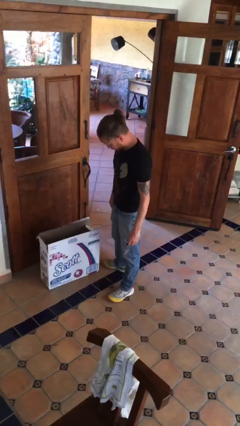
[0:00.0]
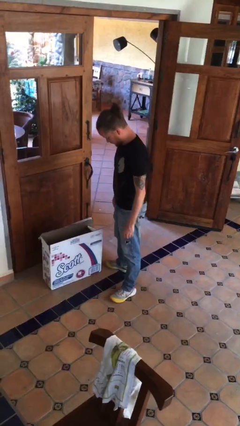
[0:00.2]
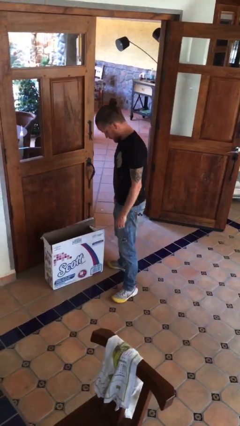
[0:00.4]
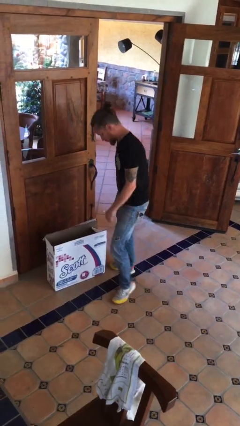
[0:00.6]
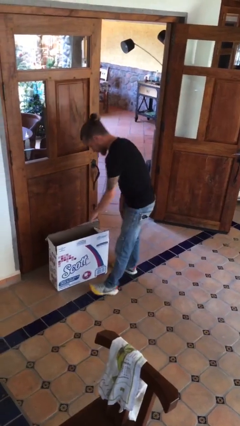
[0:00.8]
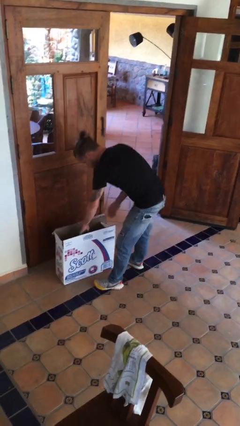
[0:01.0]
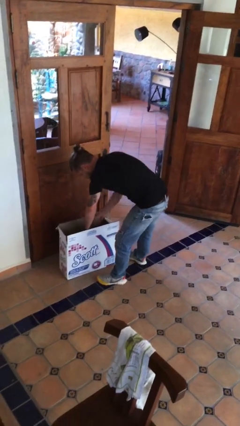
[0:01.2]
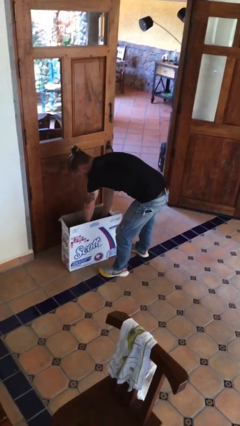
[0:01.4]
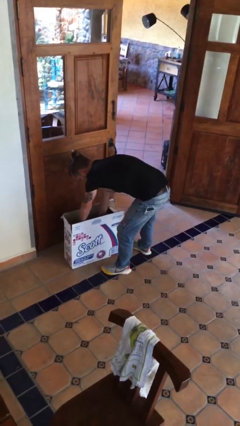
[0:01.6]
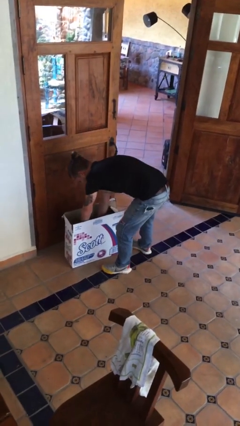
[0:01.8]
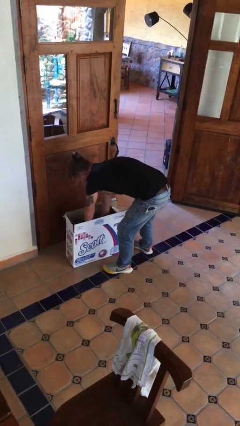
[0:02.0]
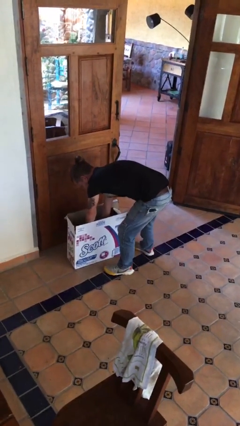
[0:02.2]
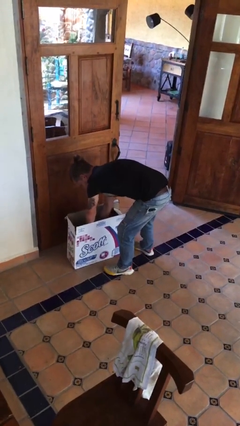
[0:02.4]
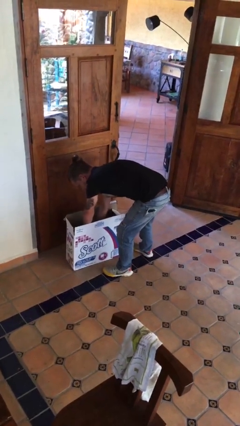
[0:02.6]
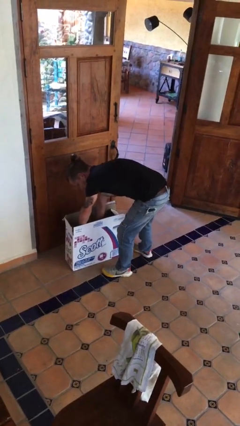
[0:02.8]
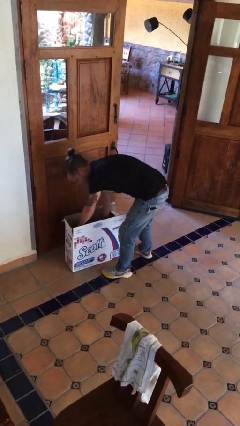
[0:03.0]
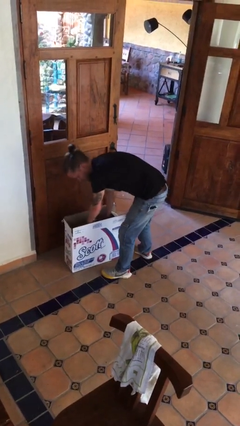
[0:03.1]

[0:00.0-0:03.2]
person searches in box

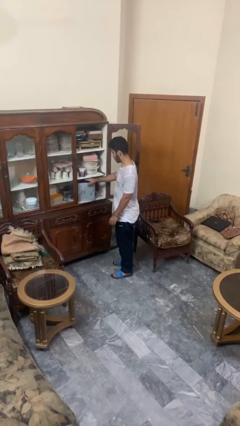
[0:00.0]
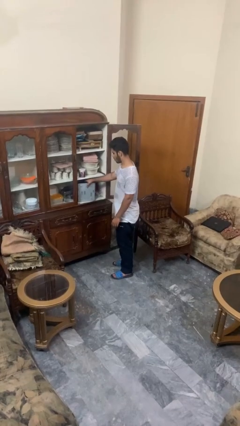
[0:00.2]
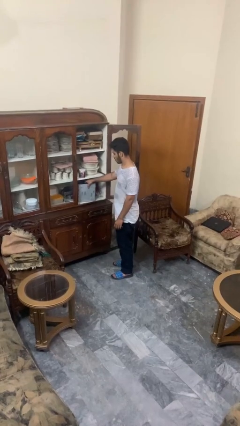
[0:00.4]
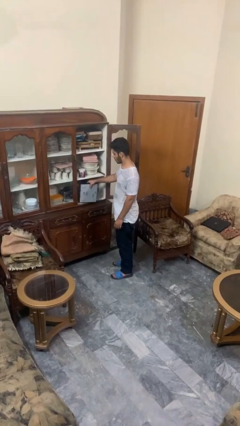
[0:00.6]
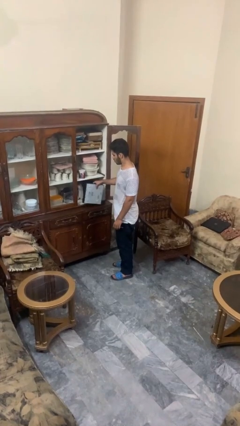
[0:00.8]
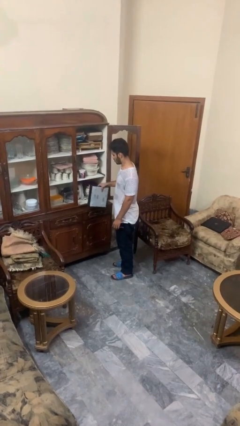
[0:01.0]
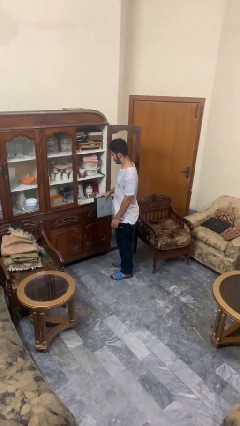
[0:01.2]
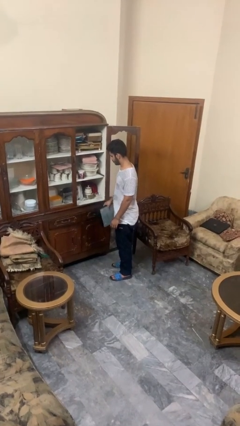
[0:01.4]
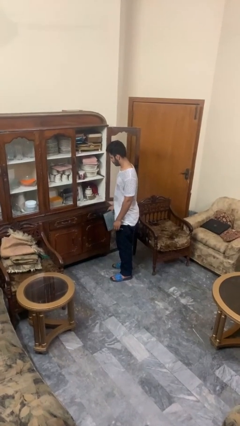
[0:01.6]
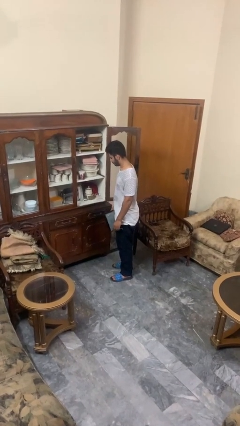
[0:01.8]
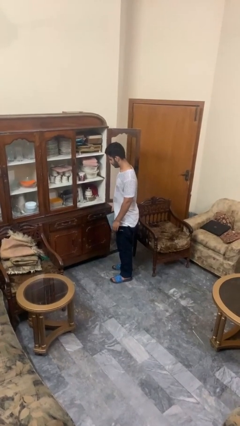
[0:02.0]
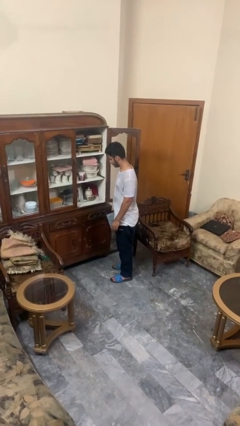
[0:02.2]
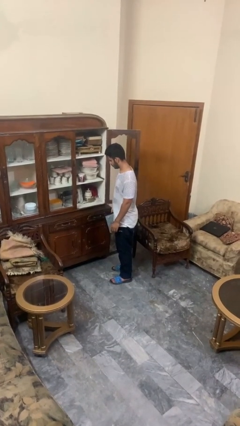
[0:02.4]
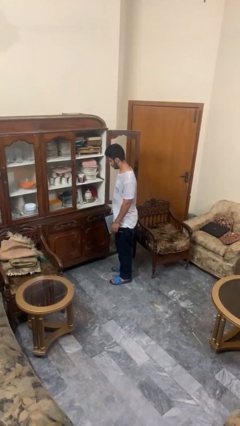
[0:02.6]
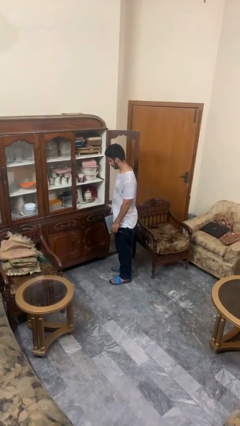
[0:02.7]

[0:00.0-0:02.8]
person picks up object from cabinet

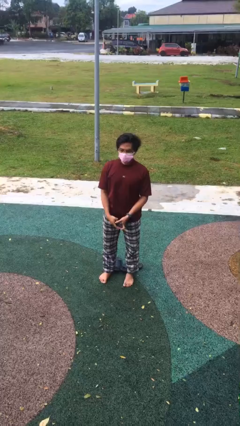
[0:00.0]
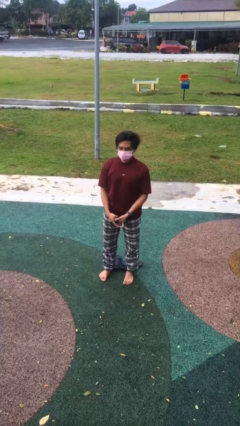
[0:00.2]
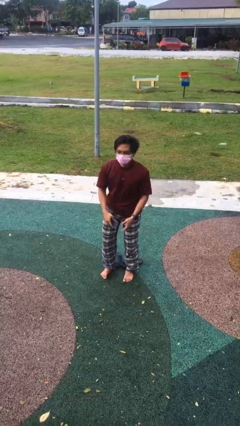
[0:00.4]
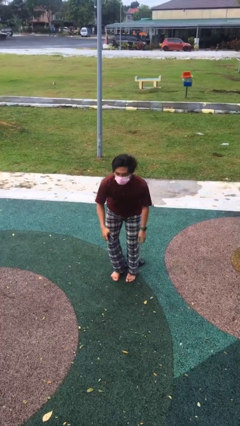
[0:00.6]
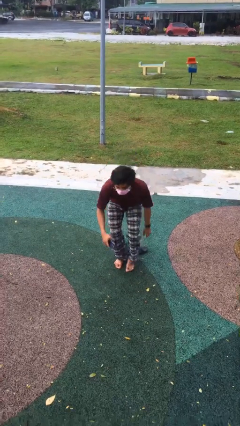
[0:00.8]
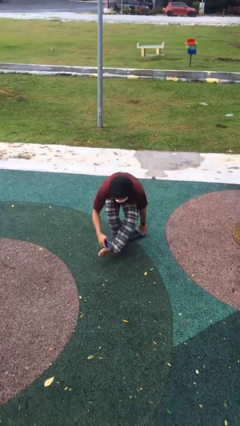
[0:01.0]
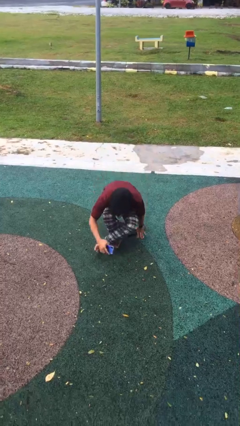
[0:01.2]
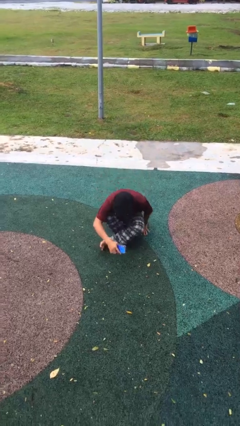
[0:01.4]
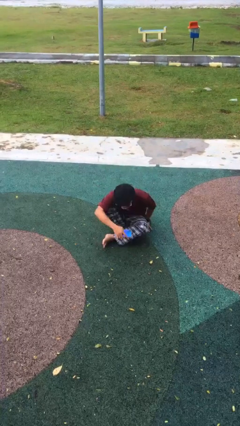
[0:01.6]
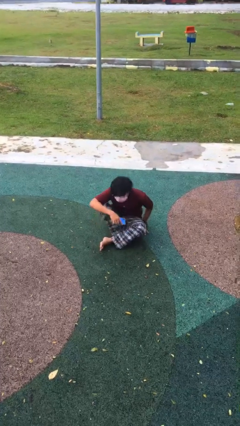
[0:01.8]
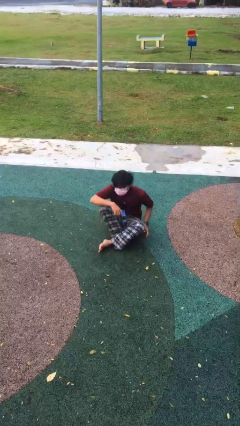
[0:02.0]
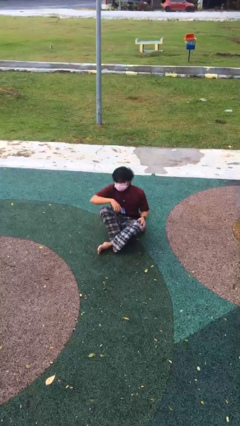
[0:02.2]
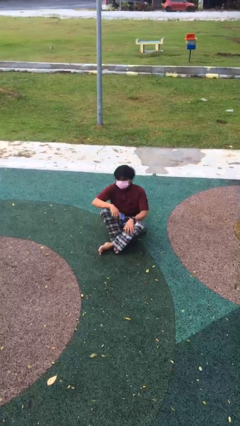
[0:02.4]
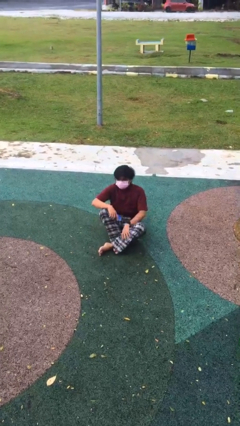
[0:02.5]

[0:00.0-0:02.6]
person sits crisscross

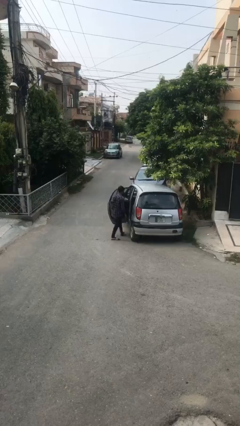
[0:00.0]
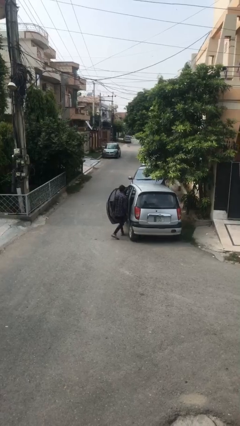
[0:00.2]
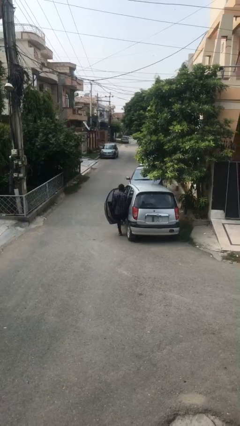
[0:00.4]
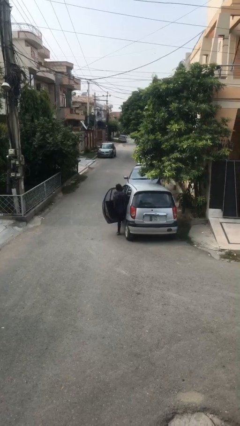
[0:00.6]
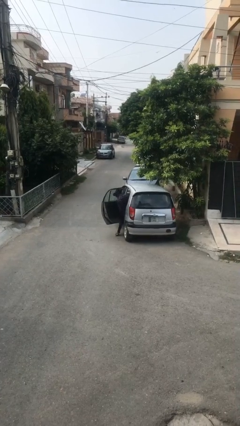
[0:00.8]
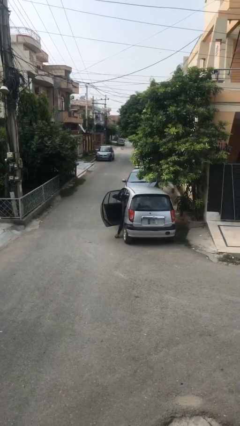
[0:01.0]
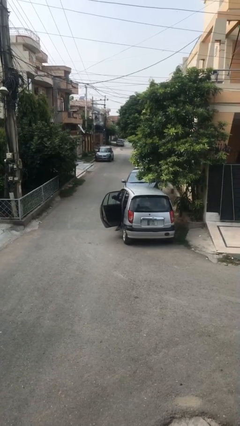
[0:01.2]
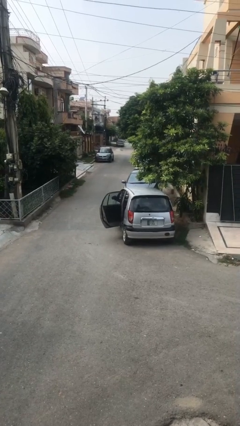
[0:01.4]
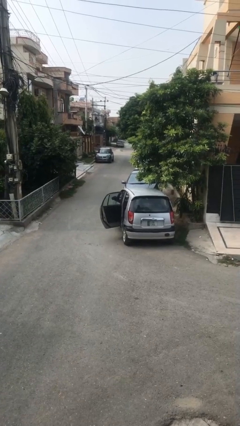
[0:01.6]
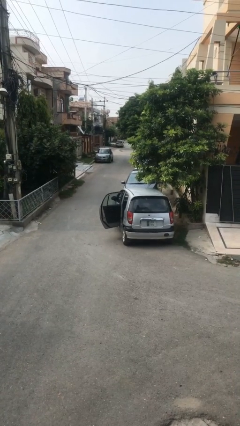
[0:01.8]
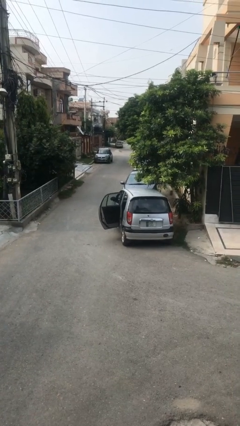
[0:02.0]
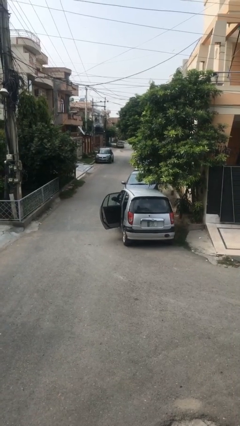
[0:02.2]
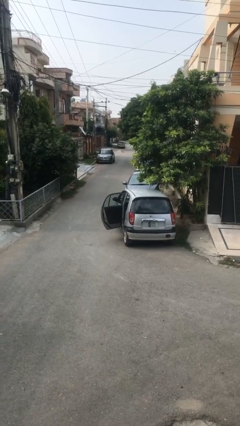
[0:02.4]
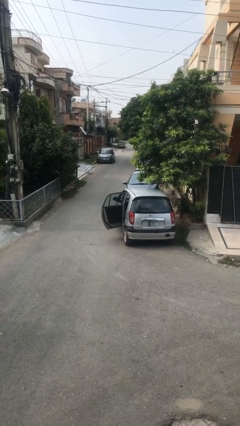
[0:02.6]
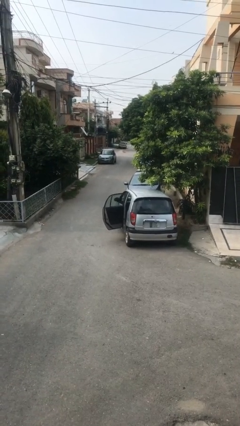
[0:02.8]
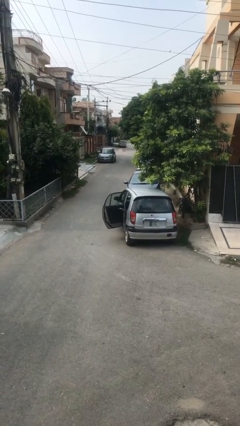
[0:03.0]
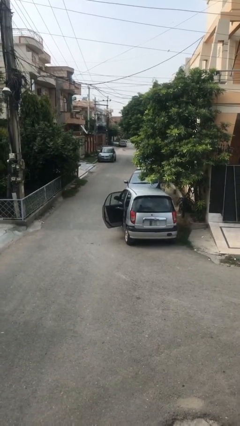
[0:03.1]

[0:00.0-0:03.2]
person enters car

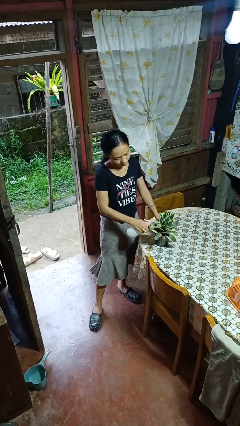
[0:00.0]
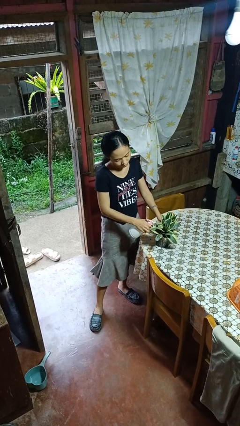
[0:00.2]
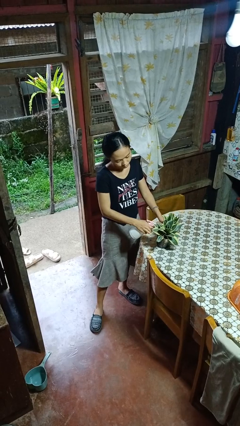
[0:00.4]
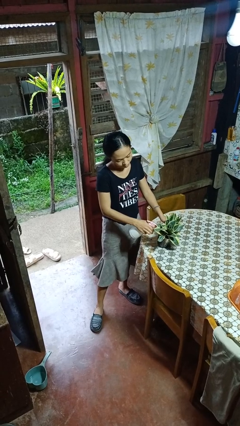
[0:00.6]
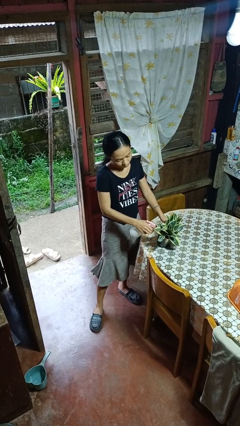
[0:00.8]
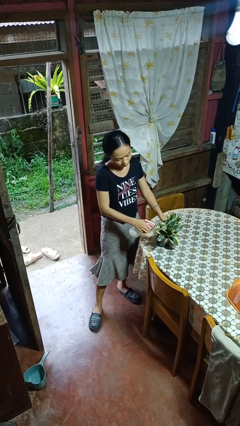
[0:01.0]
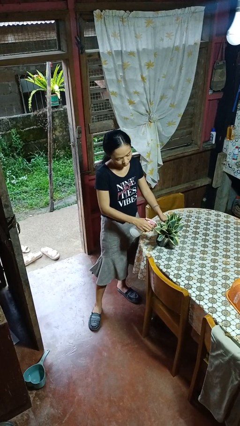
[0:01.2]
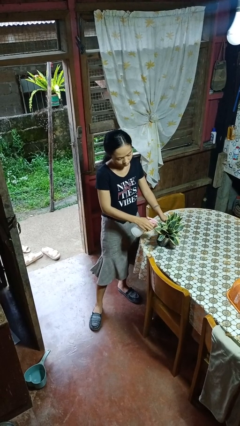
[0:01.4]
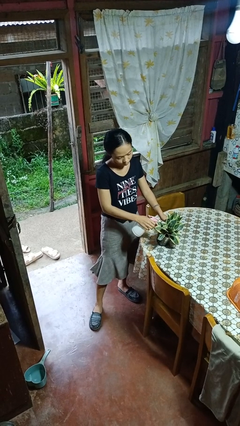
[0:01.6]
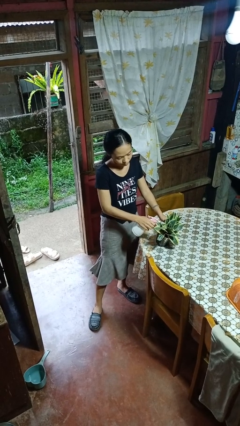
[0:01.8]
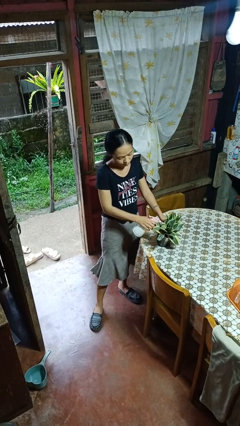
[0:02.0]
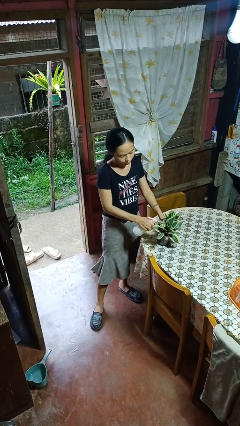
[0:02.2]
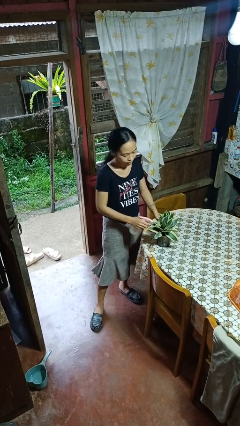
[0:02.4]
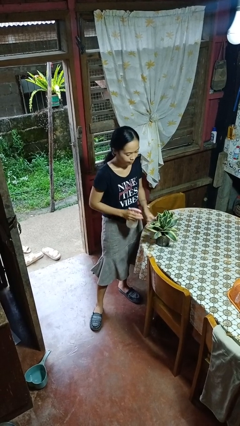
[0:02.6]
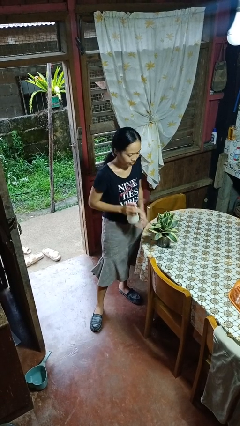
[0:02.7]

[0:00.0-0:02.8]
person waters houseplant

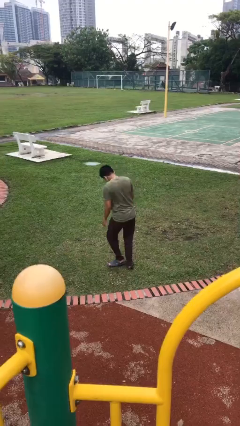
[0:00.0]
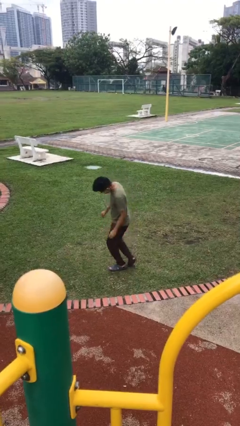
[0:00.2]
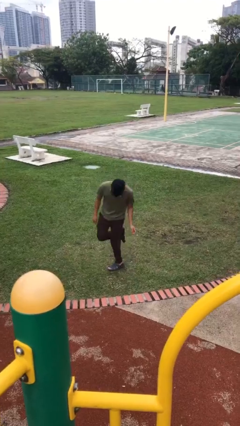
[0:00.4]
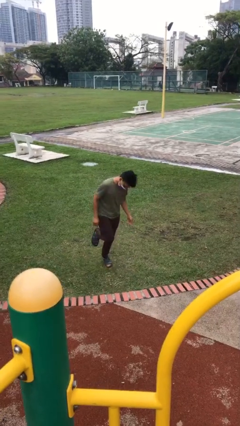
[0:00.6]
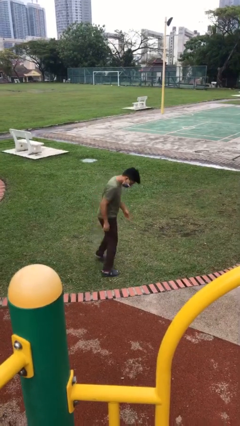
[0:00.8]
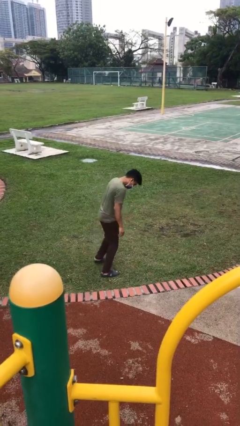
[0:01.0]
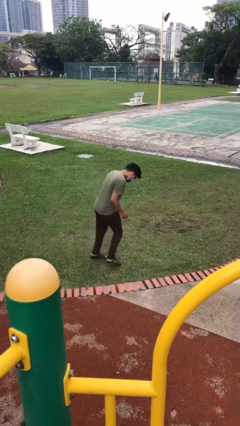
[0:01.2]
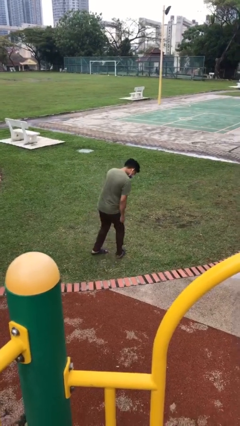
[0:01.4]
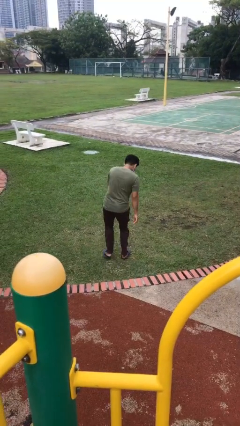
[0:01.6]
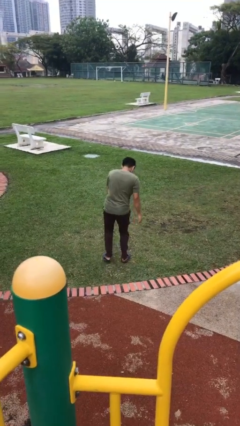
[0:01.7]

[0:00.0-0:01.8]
person twirls

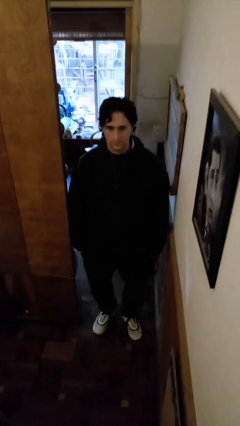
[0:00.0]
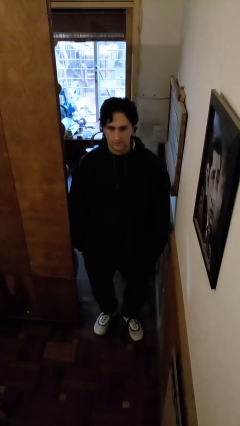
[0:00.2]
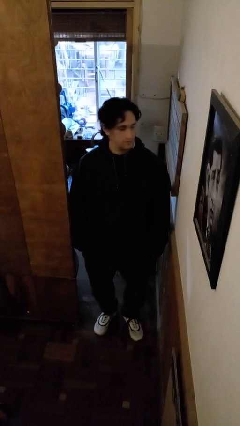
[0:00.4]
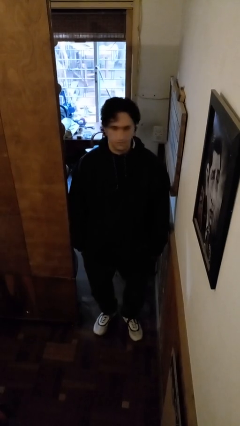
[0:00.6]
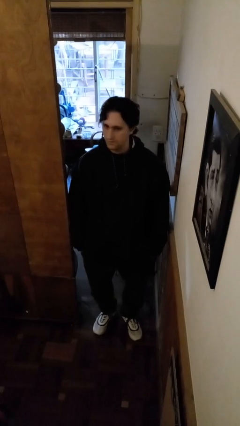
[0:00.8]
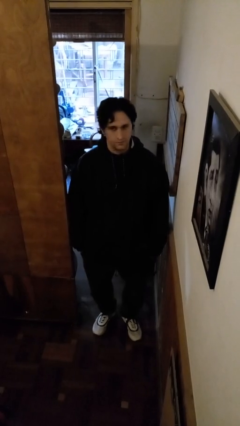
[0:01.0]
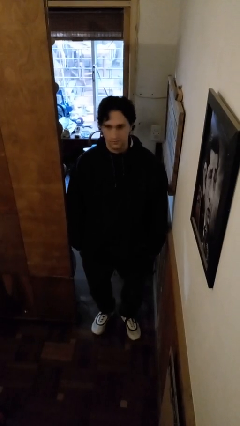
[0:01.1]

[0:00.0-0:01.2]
person shakes head
